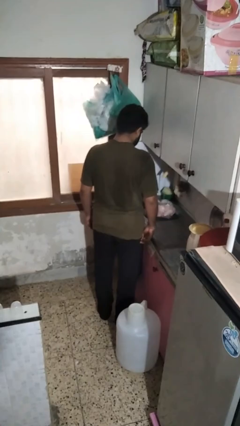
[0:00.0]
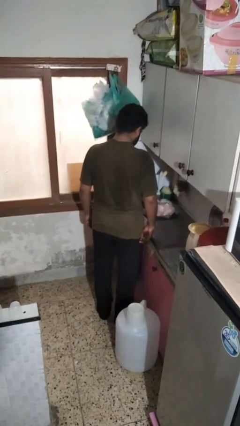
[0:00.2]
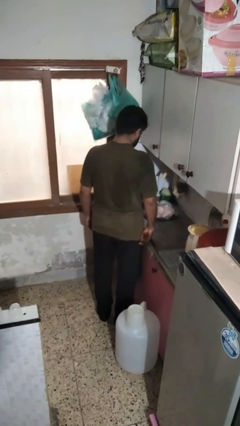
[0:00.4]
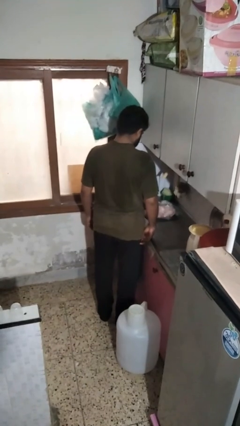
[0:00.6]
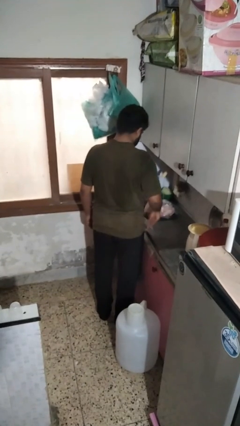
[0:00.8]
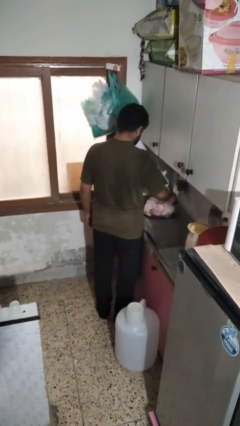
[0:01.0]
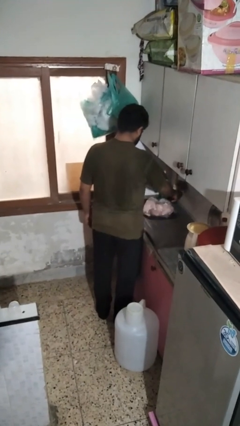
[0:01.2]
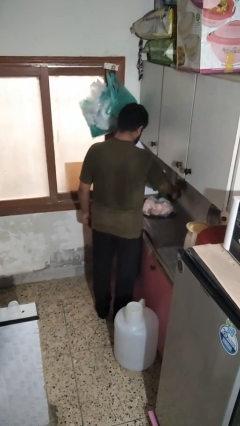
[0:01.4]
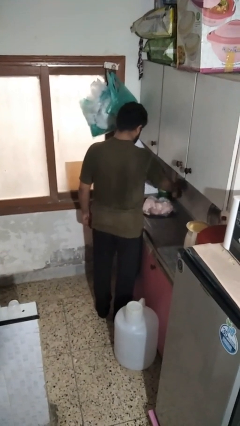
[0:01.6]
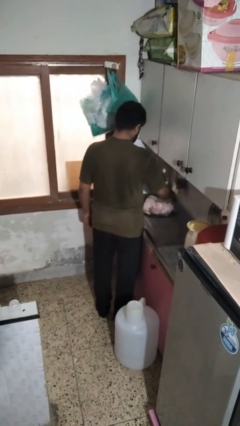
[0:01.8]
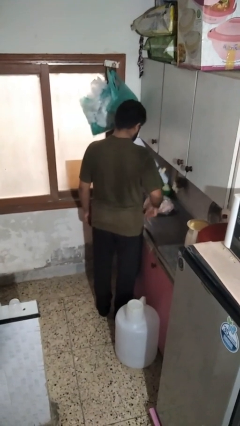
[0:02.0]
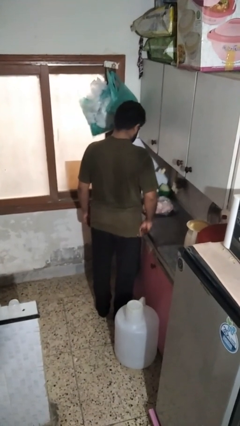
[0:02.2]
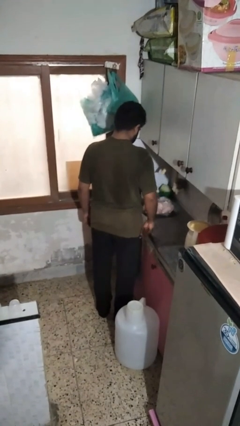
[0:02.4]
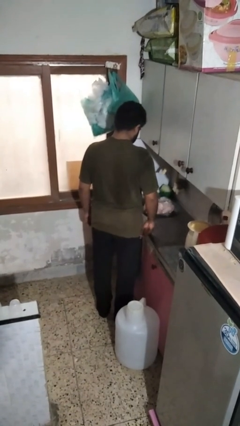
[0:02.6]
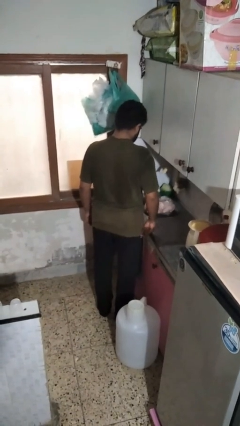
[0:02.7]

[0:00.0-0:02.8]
person turns off faucet

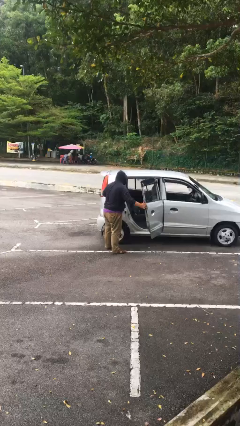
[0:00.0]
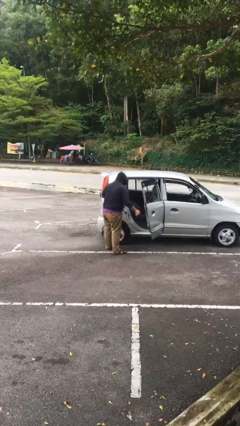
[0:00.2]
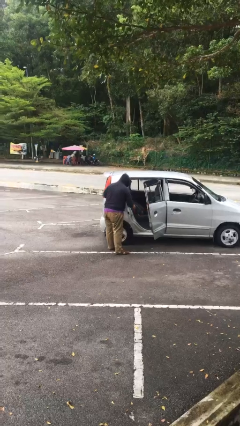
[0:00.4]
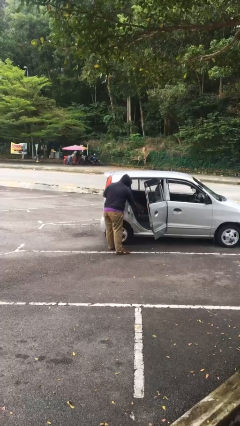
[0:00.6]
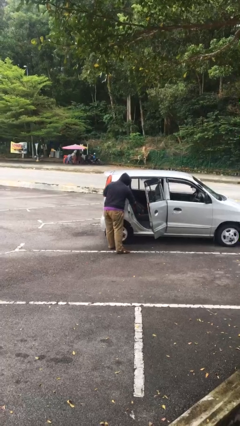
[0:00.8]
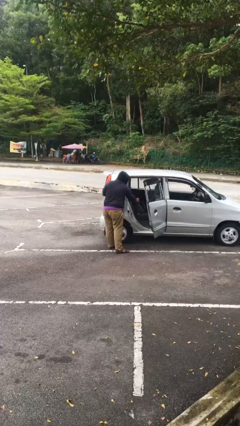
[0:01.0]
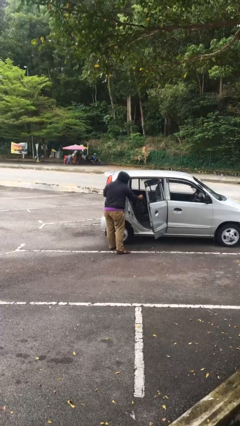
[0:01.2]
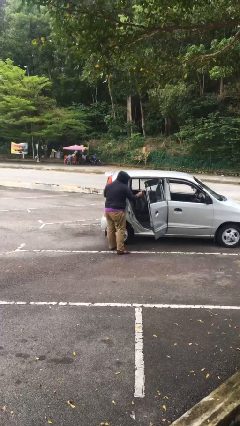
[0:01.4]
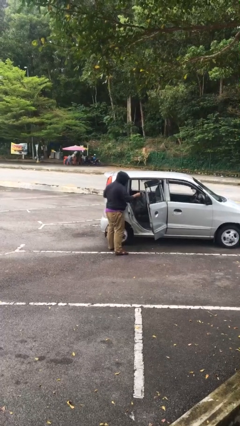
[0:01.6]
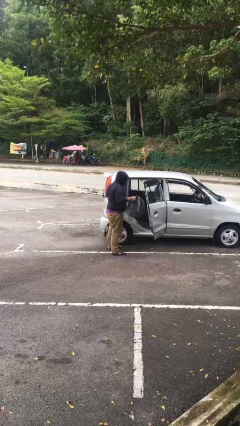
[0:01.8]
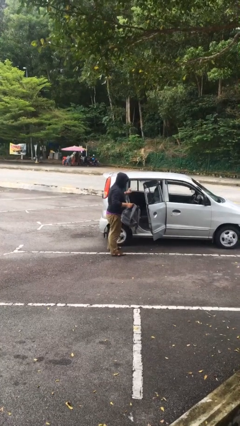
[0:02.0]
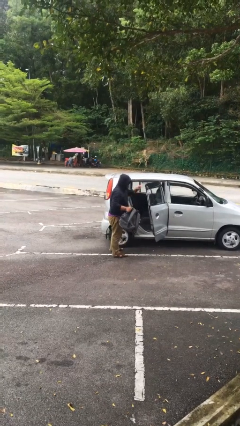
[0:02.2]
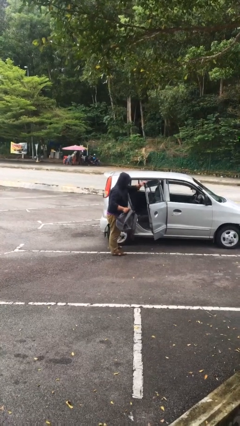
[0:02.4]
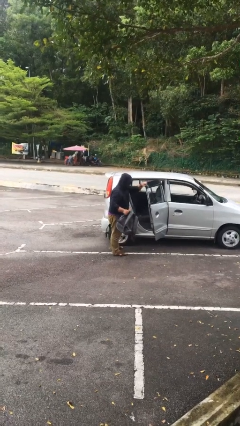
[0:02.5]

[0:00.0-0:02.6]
person unloads car

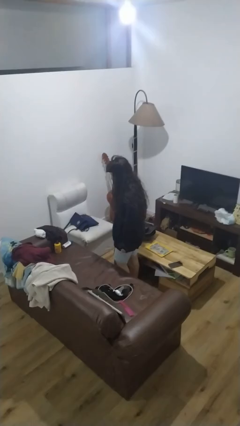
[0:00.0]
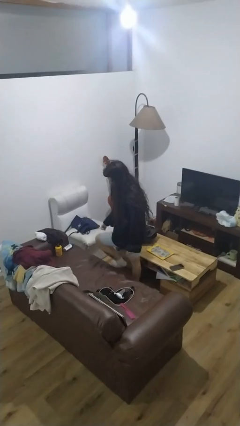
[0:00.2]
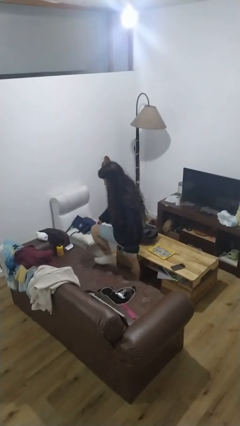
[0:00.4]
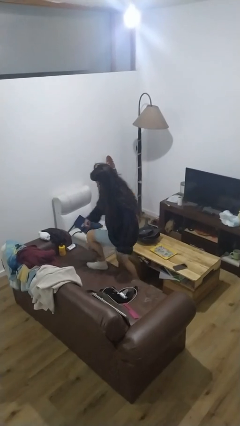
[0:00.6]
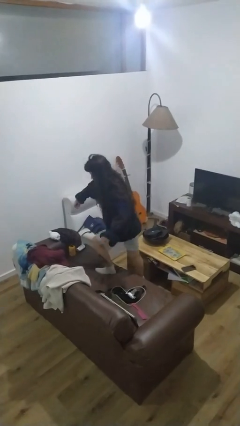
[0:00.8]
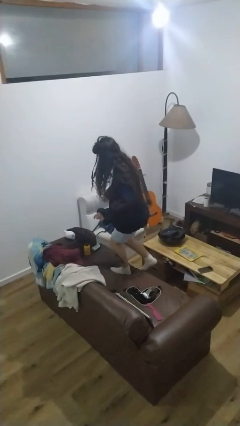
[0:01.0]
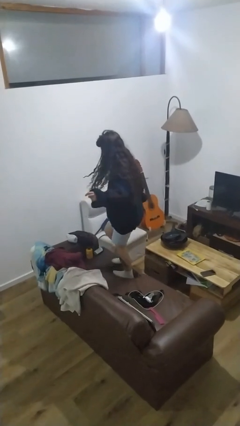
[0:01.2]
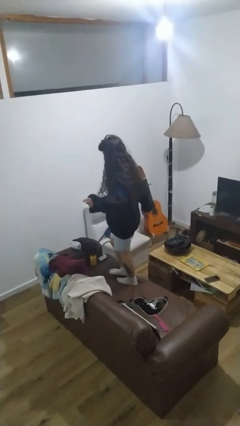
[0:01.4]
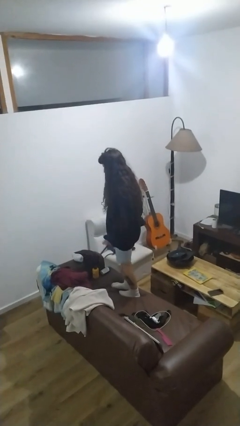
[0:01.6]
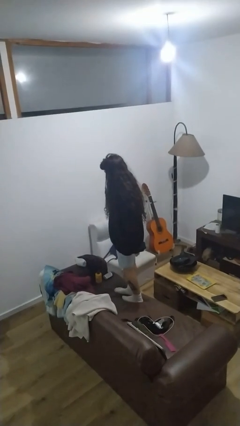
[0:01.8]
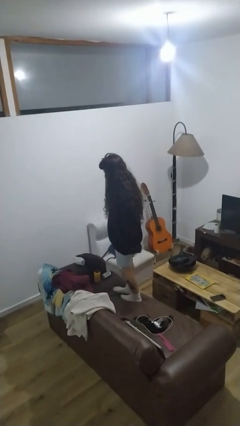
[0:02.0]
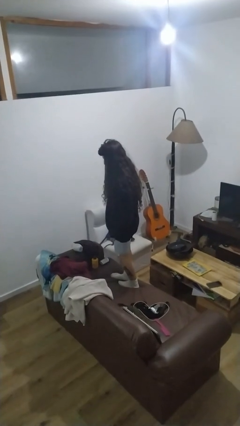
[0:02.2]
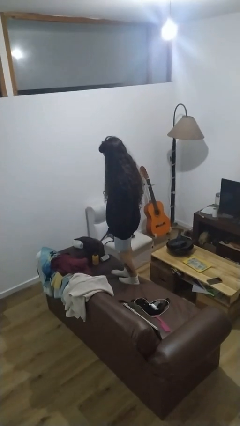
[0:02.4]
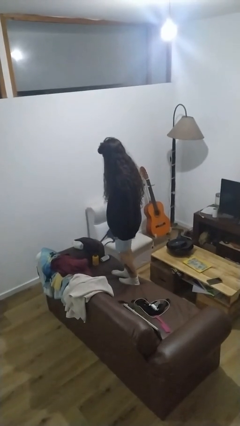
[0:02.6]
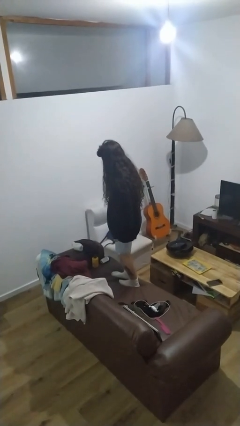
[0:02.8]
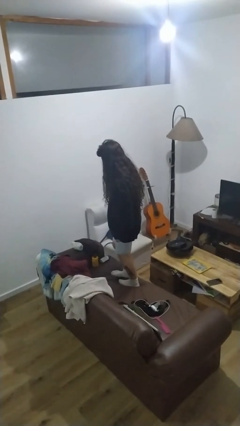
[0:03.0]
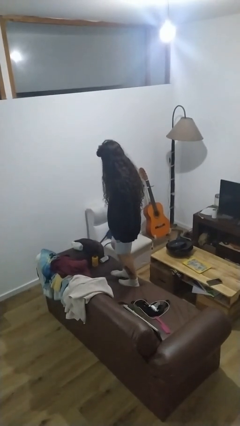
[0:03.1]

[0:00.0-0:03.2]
person climbs on couch

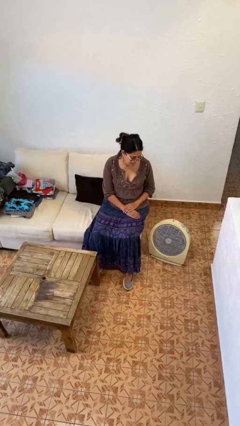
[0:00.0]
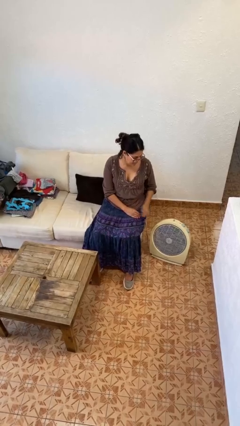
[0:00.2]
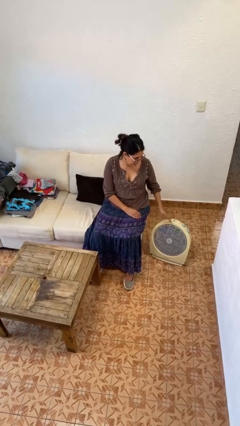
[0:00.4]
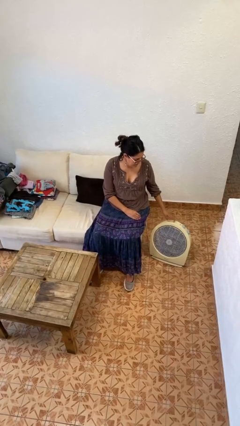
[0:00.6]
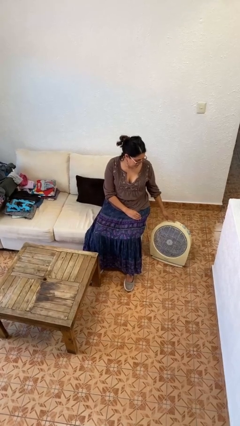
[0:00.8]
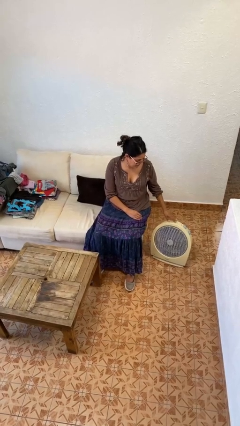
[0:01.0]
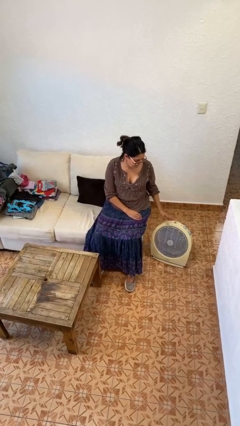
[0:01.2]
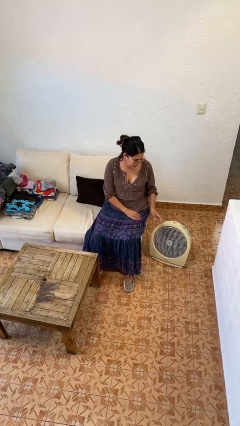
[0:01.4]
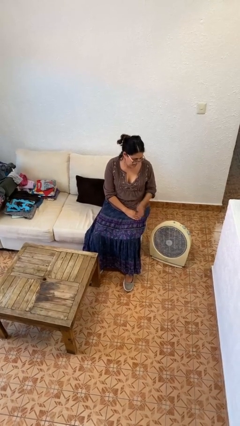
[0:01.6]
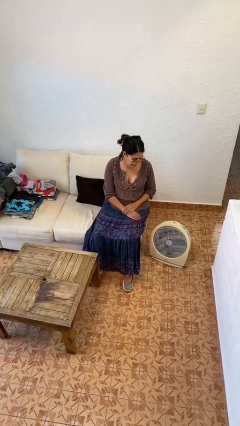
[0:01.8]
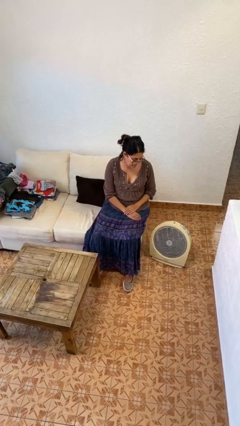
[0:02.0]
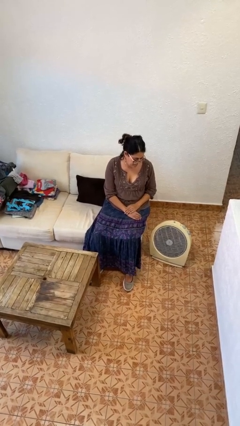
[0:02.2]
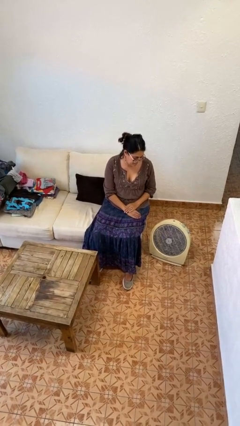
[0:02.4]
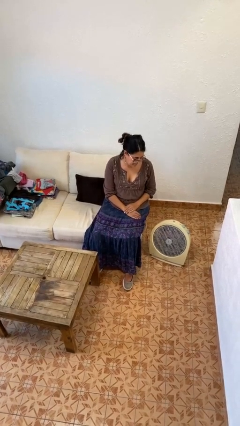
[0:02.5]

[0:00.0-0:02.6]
person turns on fan

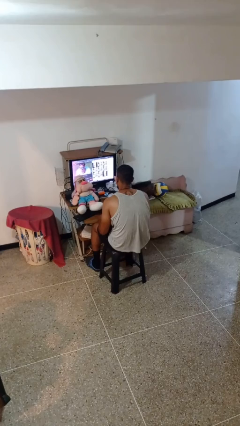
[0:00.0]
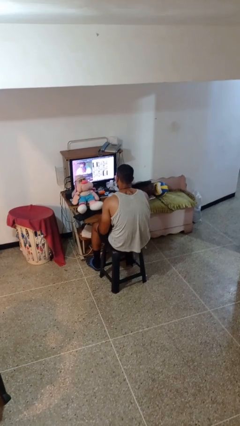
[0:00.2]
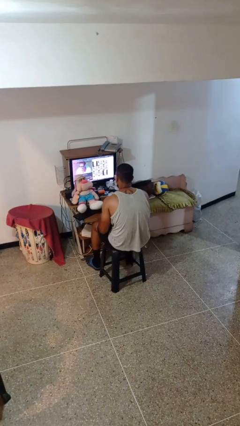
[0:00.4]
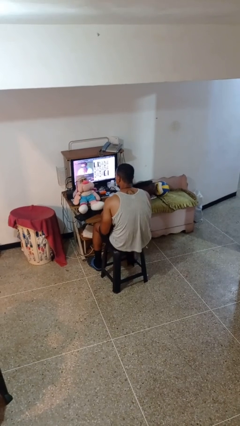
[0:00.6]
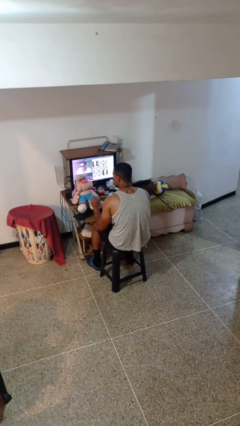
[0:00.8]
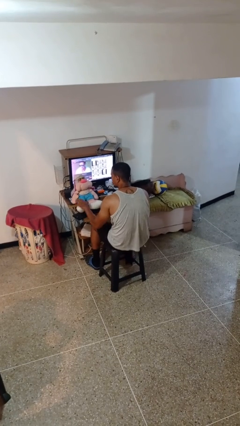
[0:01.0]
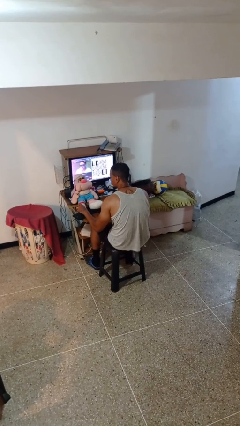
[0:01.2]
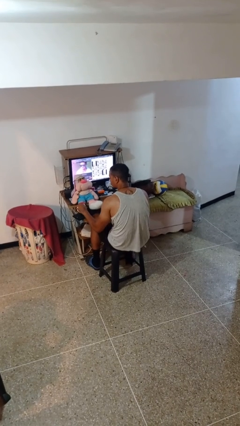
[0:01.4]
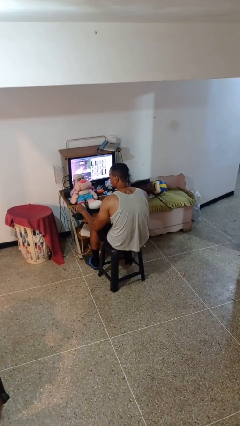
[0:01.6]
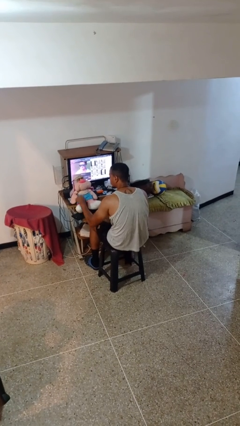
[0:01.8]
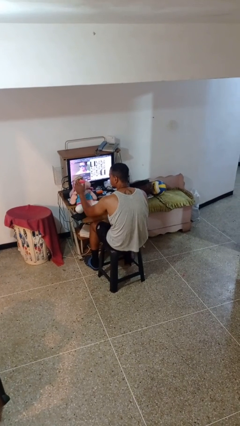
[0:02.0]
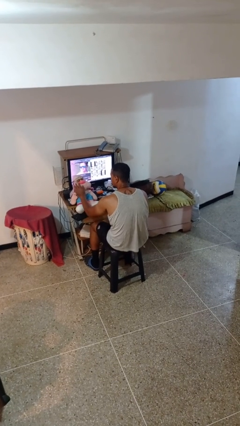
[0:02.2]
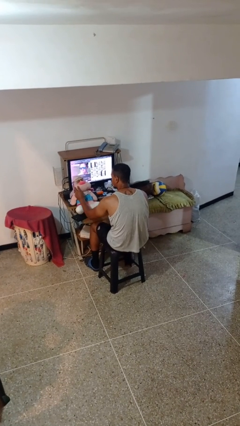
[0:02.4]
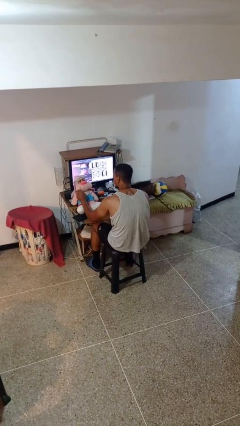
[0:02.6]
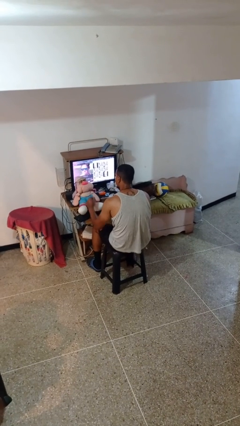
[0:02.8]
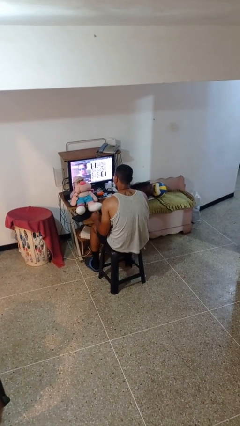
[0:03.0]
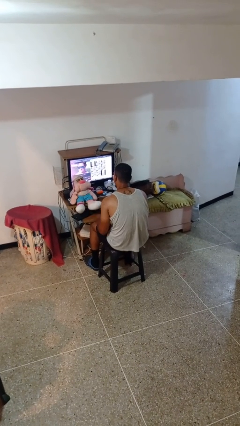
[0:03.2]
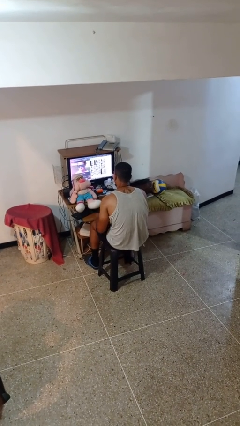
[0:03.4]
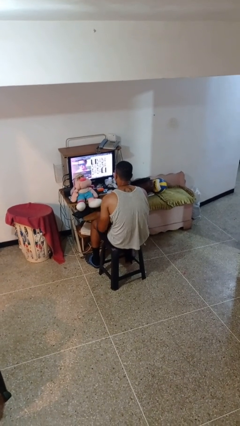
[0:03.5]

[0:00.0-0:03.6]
person waves hand over object

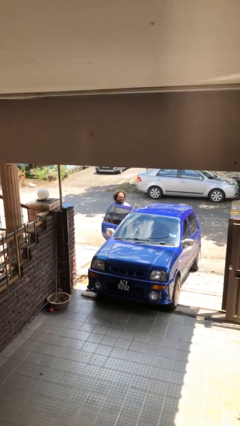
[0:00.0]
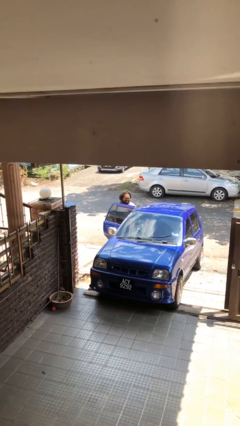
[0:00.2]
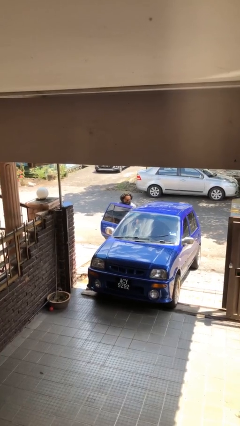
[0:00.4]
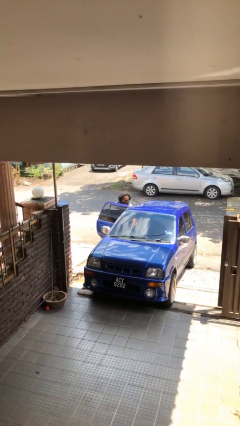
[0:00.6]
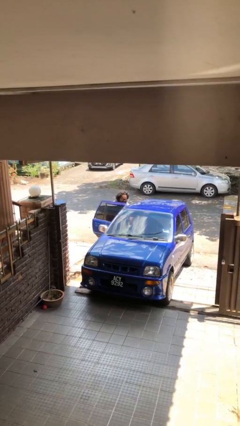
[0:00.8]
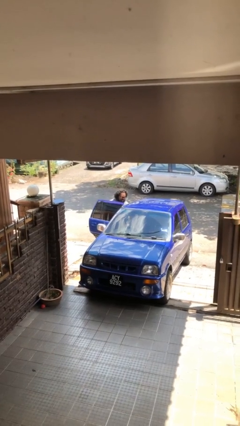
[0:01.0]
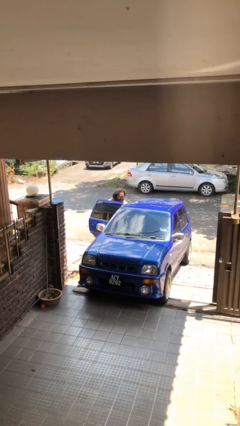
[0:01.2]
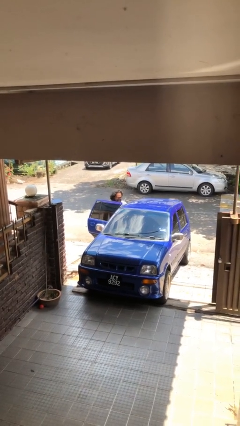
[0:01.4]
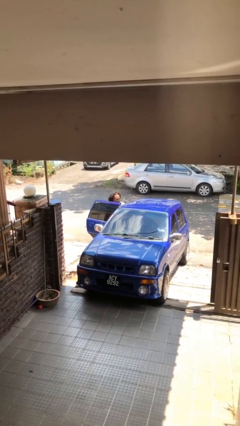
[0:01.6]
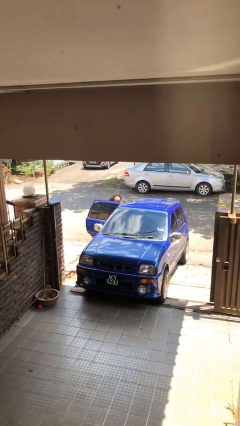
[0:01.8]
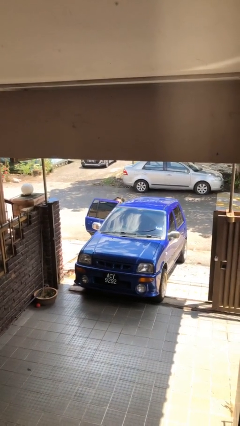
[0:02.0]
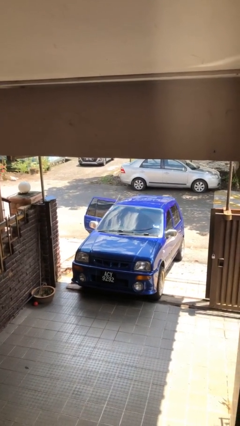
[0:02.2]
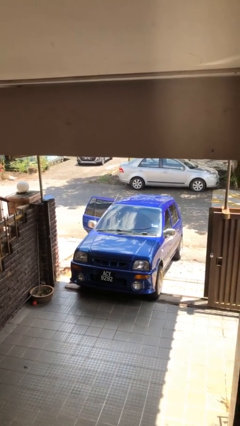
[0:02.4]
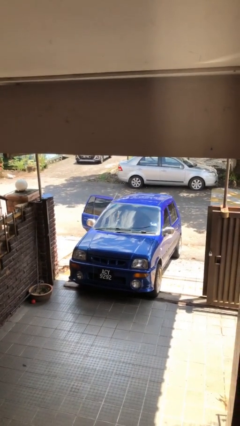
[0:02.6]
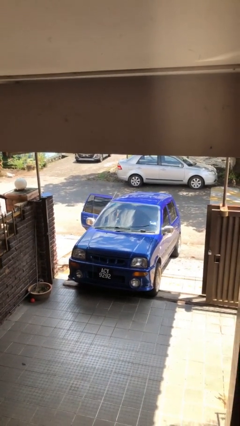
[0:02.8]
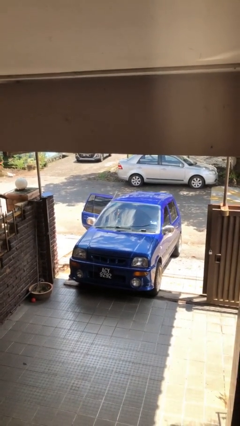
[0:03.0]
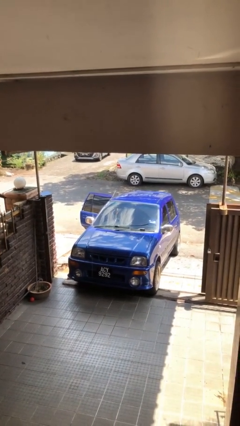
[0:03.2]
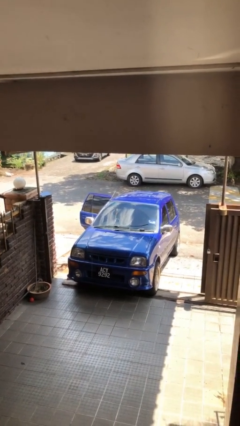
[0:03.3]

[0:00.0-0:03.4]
person enters car
